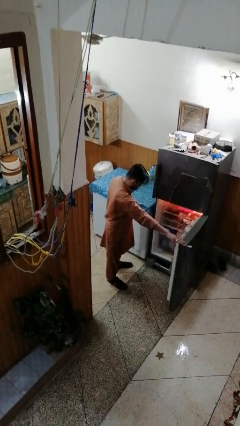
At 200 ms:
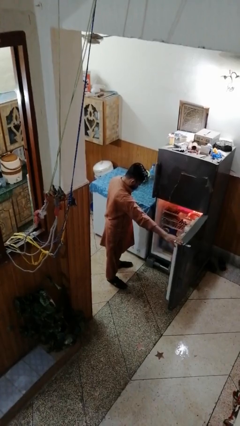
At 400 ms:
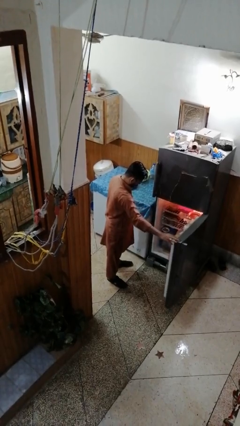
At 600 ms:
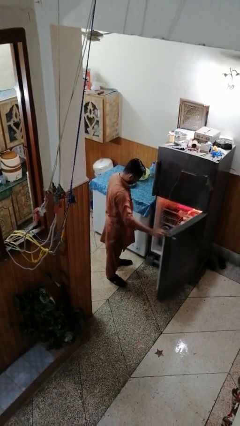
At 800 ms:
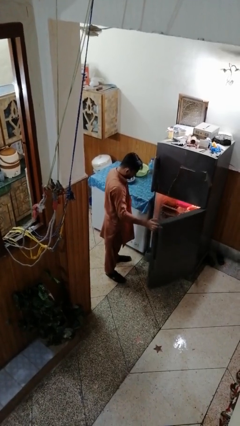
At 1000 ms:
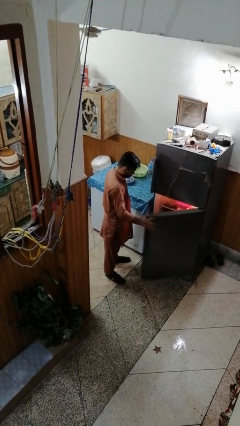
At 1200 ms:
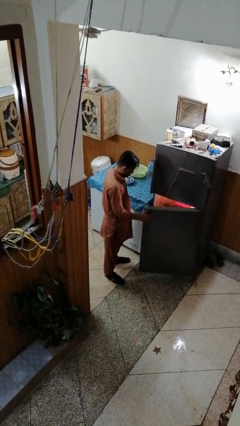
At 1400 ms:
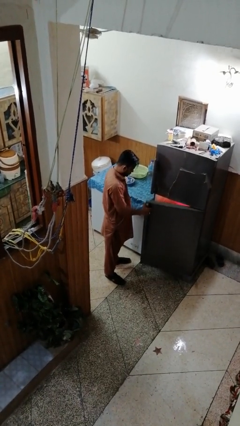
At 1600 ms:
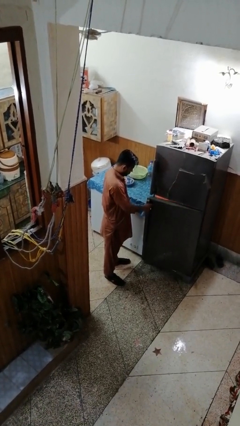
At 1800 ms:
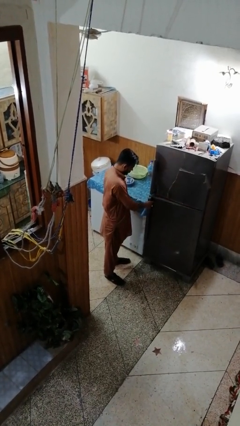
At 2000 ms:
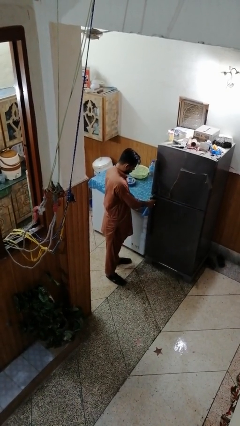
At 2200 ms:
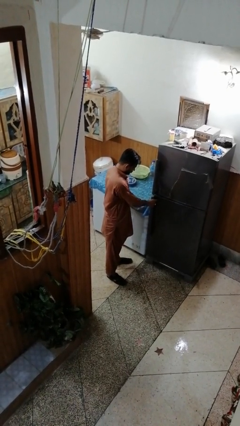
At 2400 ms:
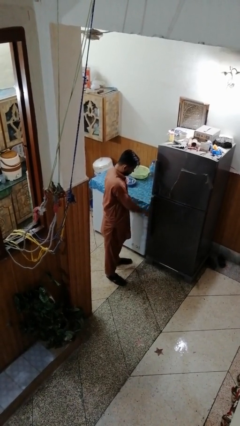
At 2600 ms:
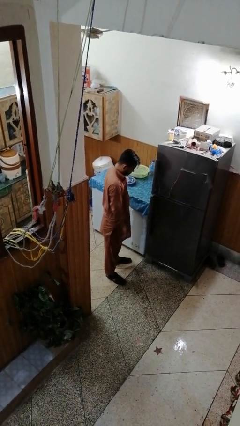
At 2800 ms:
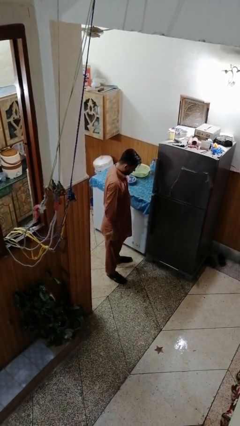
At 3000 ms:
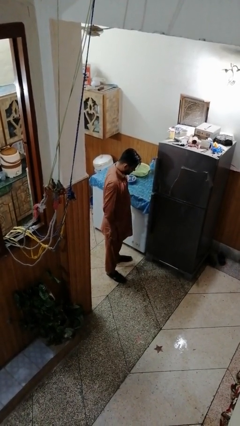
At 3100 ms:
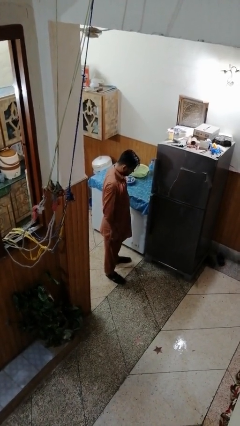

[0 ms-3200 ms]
person closes refrigerator

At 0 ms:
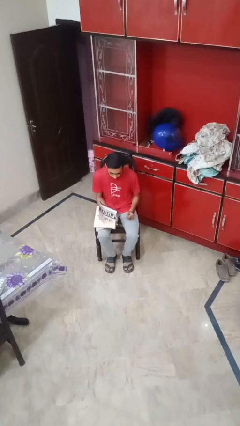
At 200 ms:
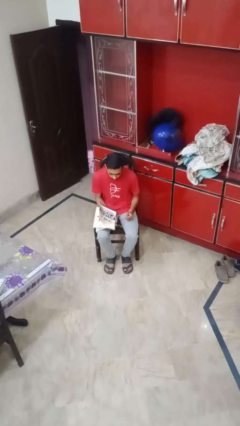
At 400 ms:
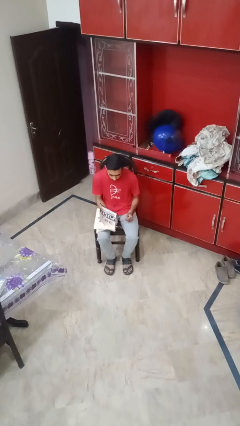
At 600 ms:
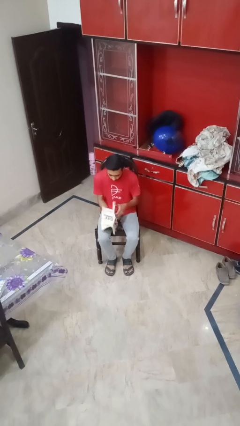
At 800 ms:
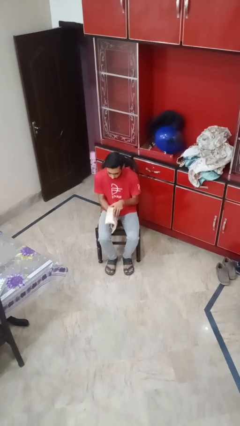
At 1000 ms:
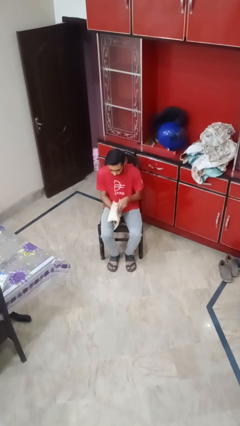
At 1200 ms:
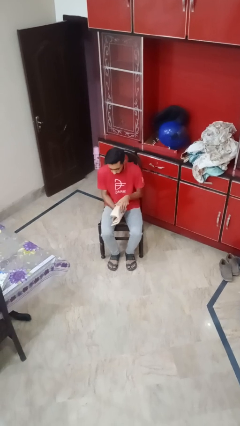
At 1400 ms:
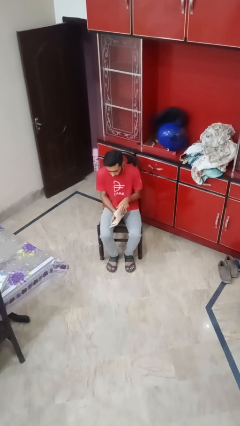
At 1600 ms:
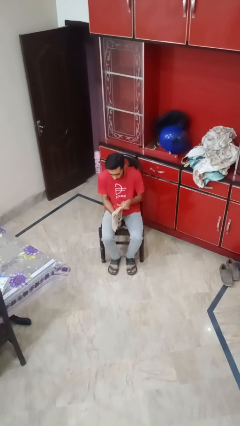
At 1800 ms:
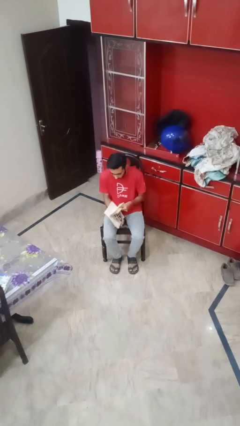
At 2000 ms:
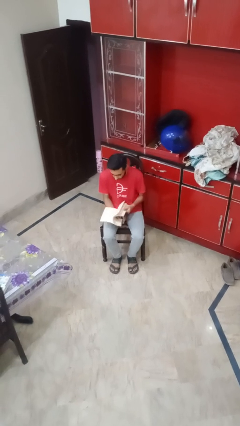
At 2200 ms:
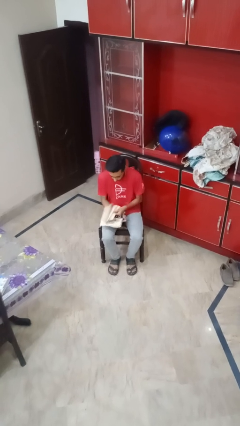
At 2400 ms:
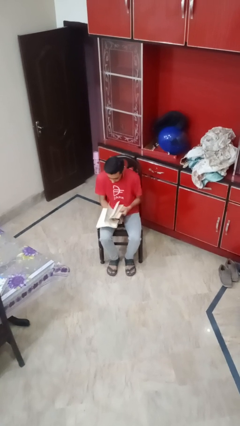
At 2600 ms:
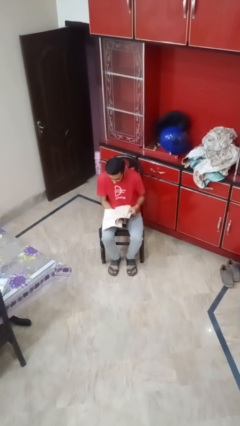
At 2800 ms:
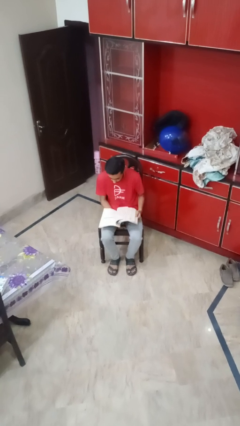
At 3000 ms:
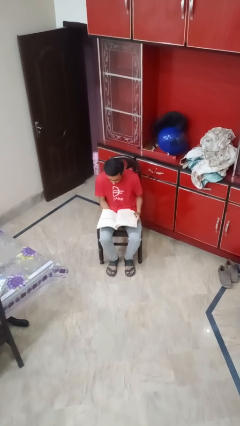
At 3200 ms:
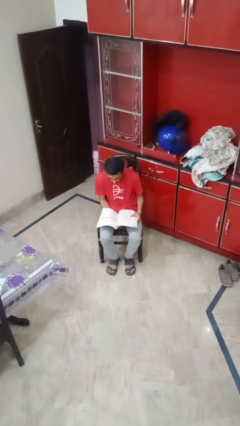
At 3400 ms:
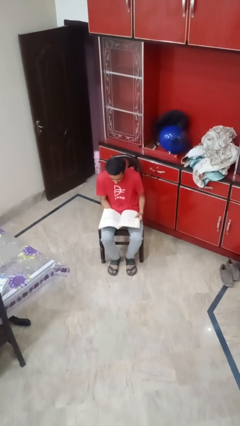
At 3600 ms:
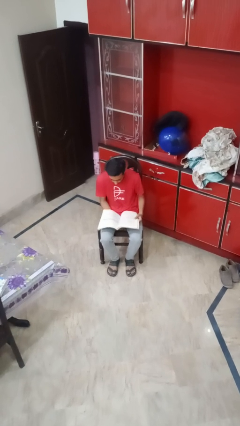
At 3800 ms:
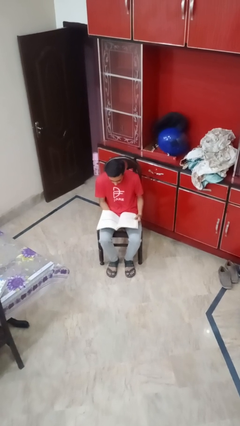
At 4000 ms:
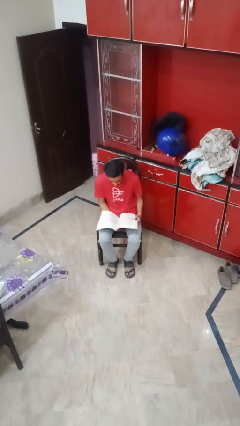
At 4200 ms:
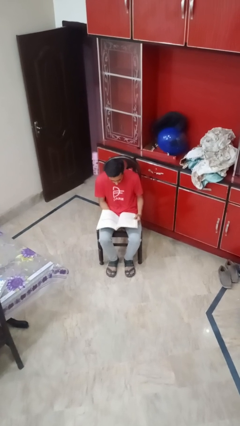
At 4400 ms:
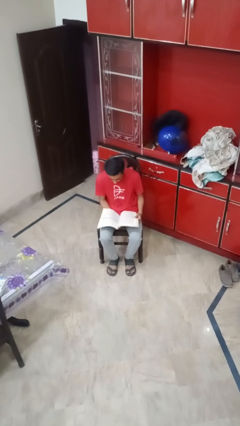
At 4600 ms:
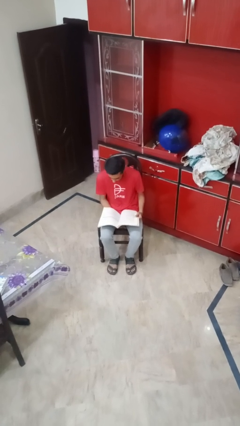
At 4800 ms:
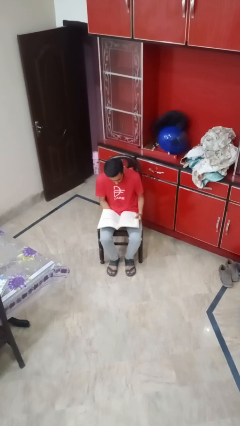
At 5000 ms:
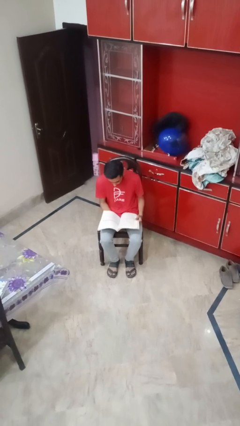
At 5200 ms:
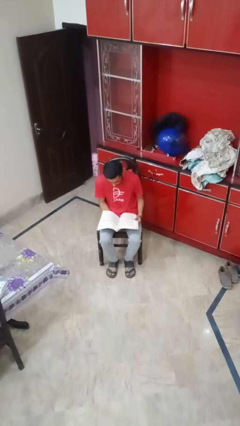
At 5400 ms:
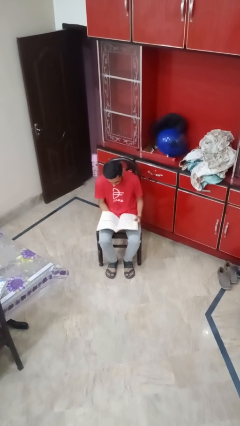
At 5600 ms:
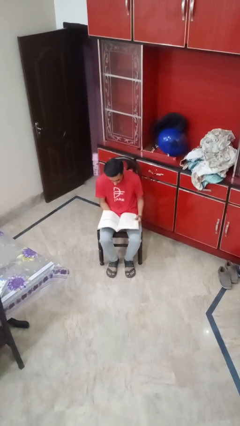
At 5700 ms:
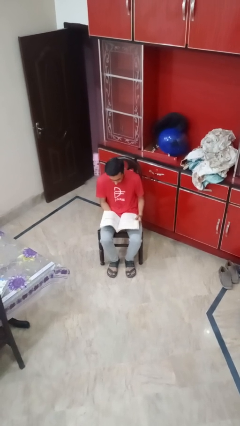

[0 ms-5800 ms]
person reads magazine

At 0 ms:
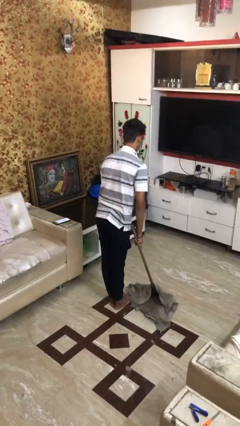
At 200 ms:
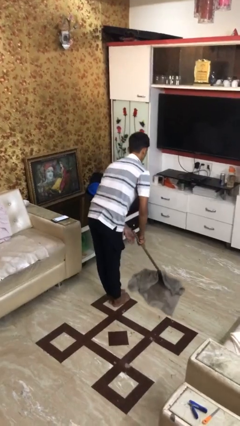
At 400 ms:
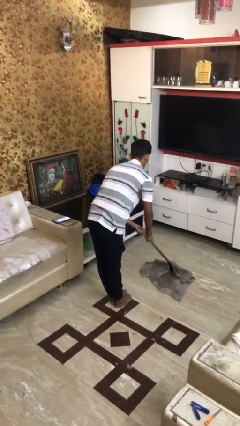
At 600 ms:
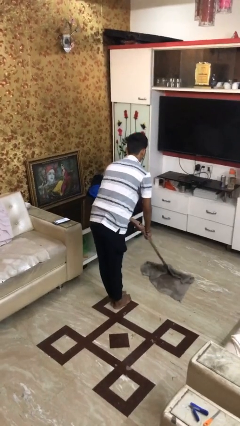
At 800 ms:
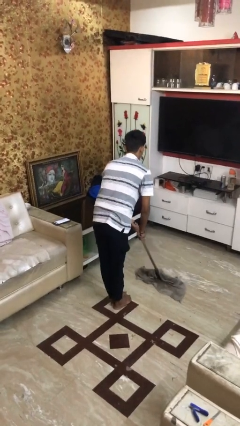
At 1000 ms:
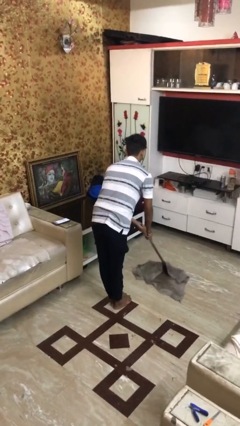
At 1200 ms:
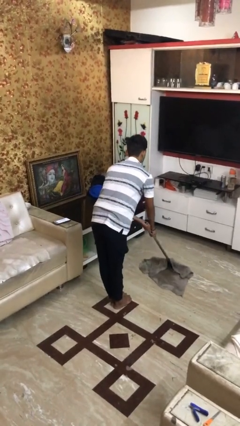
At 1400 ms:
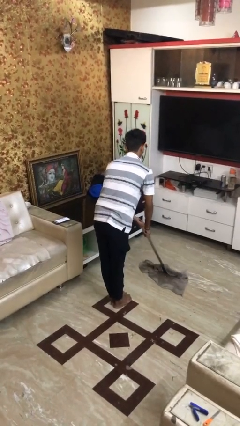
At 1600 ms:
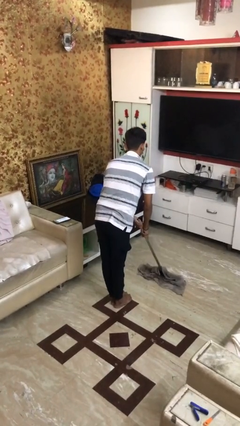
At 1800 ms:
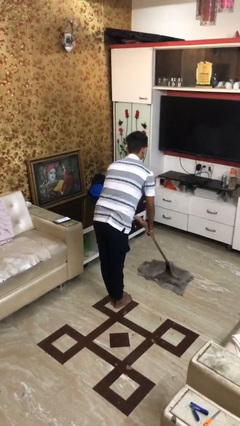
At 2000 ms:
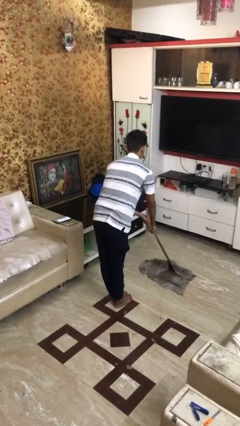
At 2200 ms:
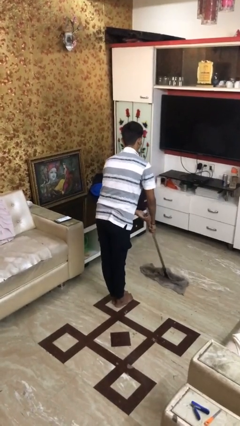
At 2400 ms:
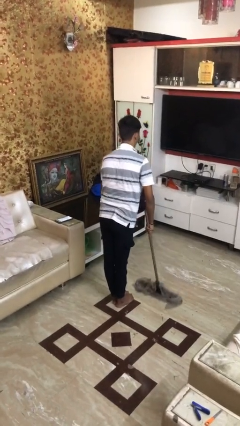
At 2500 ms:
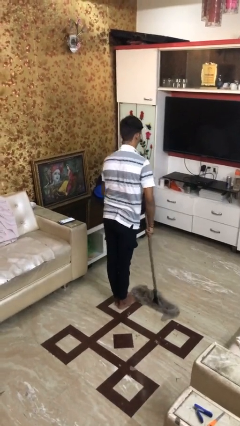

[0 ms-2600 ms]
person mops

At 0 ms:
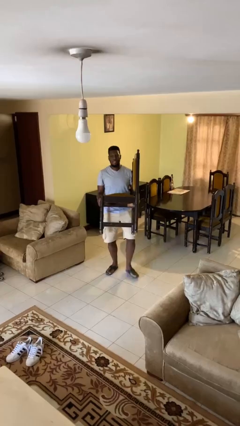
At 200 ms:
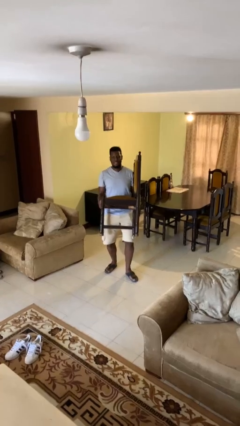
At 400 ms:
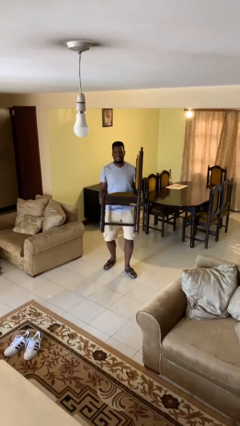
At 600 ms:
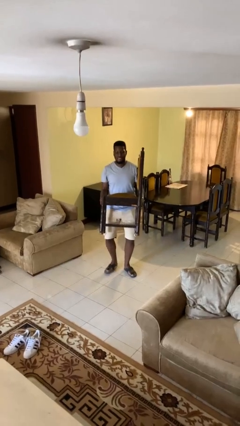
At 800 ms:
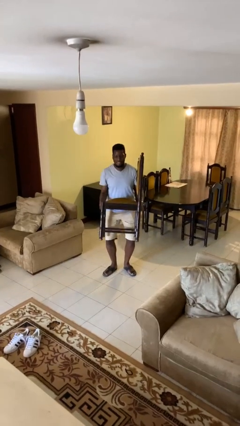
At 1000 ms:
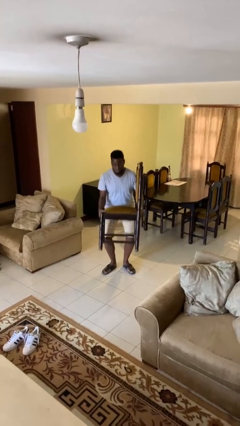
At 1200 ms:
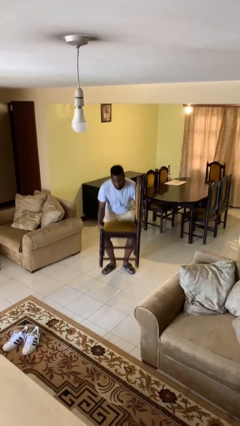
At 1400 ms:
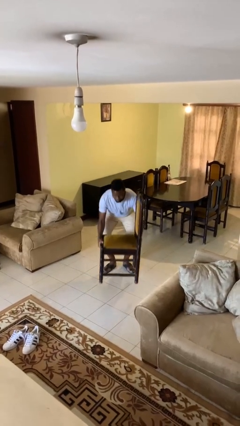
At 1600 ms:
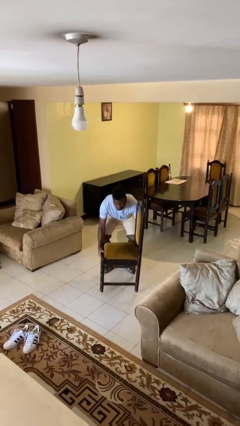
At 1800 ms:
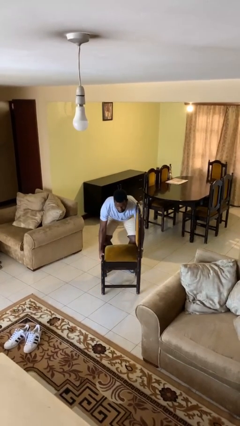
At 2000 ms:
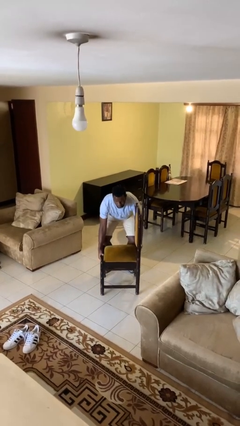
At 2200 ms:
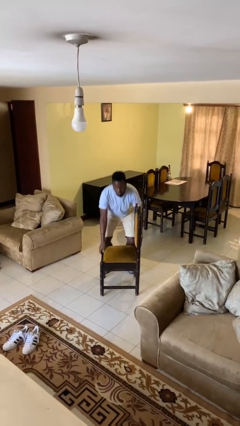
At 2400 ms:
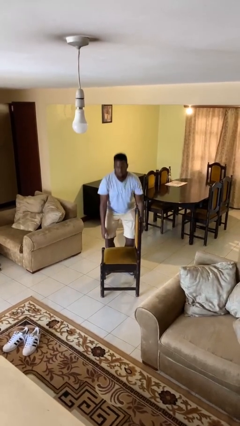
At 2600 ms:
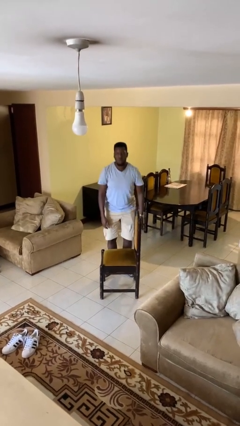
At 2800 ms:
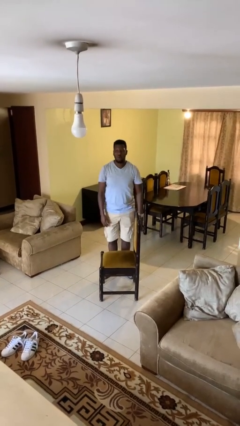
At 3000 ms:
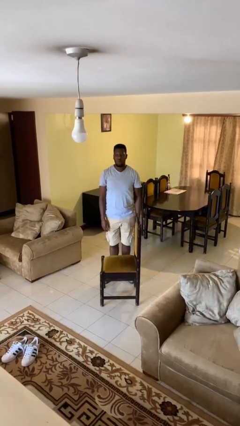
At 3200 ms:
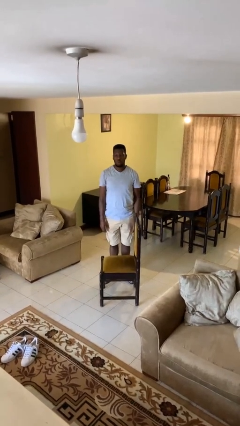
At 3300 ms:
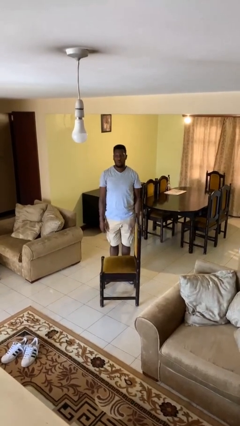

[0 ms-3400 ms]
person puts down object on floor

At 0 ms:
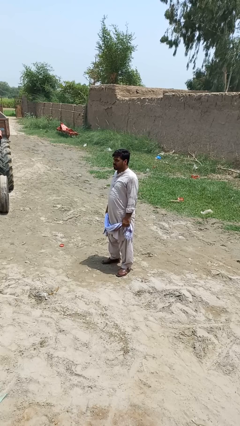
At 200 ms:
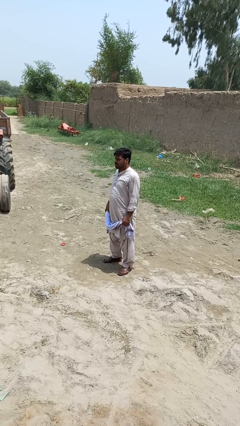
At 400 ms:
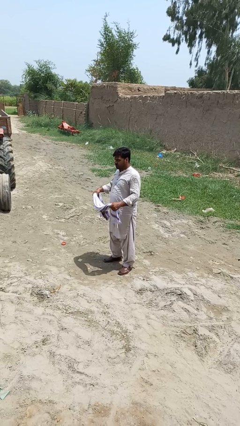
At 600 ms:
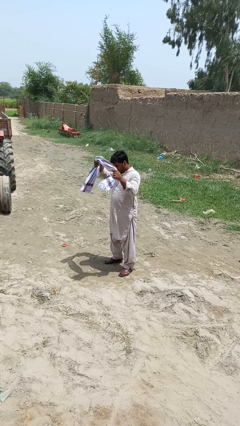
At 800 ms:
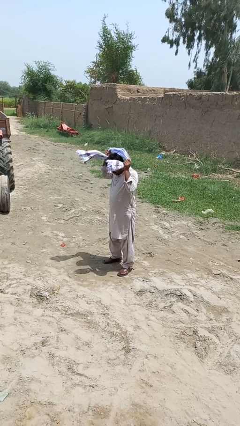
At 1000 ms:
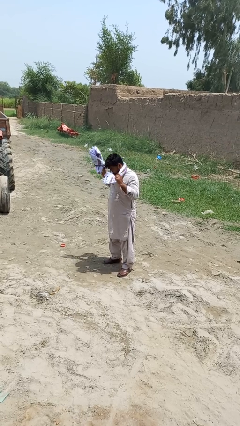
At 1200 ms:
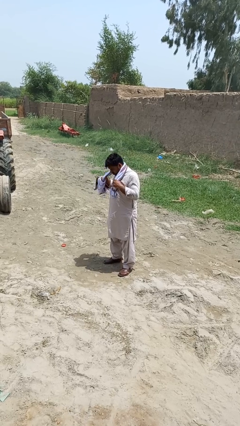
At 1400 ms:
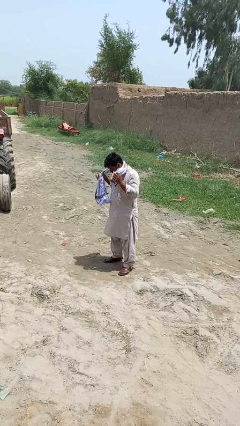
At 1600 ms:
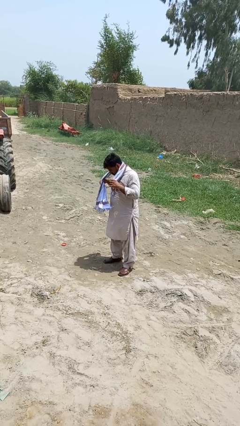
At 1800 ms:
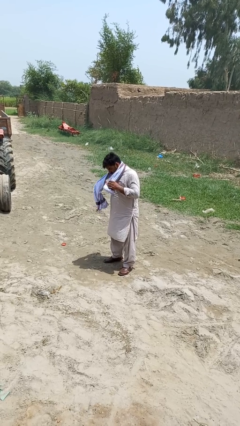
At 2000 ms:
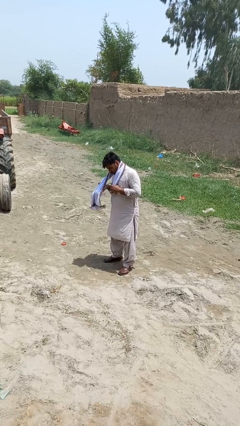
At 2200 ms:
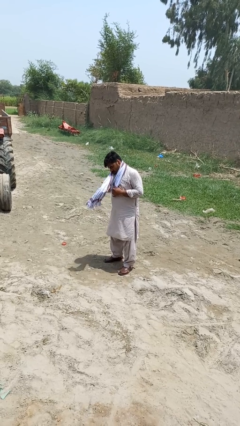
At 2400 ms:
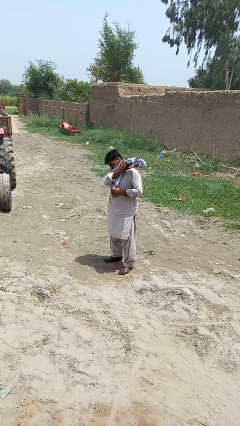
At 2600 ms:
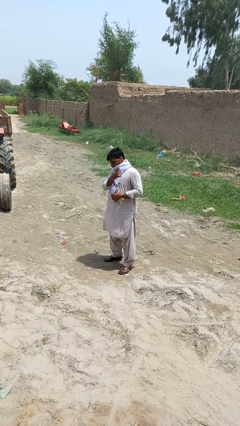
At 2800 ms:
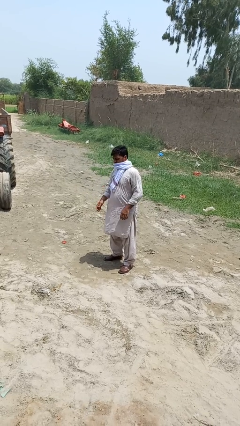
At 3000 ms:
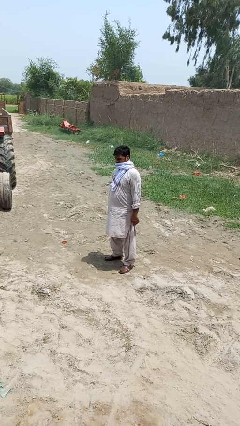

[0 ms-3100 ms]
person puts on scarf
